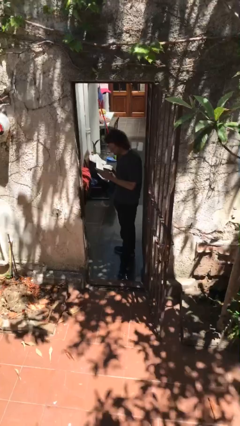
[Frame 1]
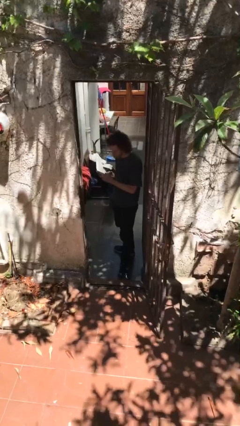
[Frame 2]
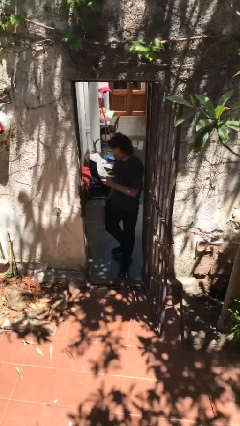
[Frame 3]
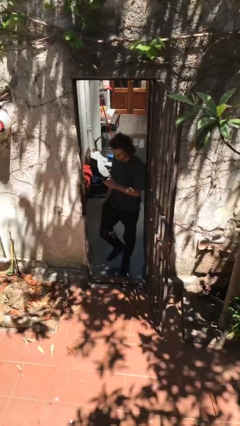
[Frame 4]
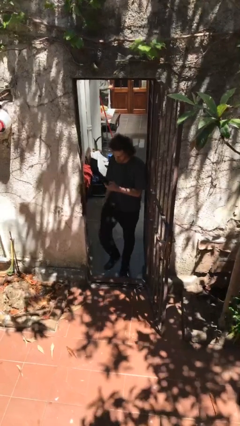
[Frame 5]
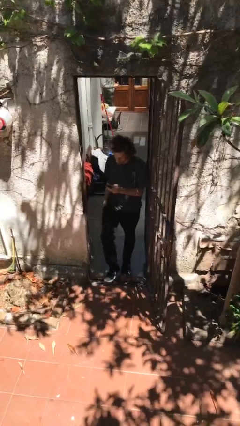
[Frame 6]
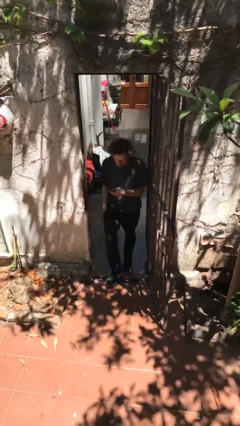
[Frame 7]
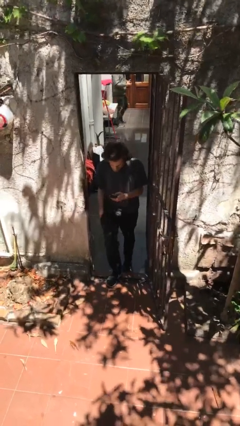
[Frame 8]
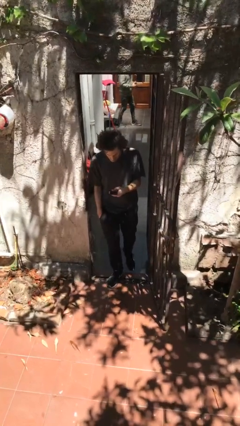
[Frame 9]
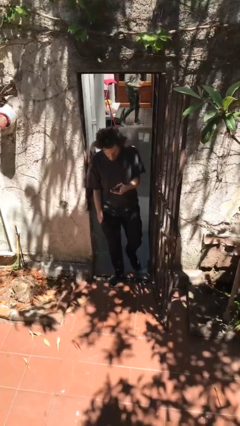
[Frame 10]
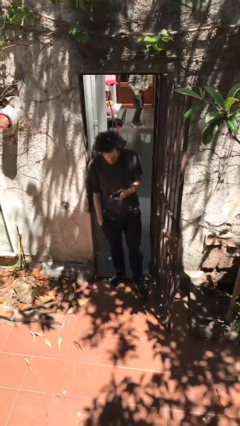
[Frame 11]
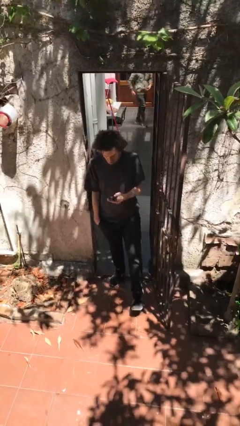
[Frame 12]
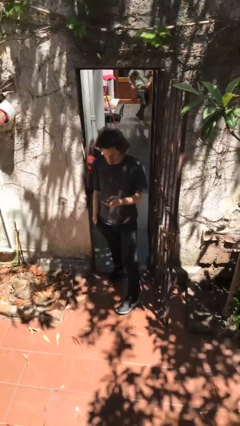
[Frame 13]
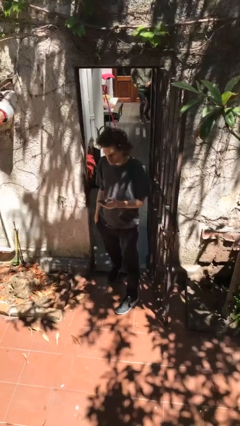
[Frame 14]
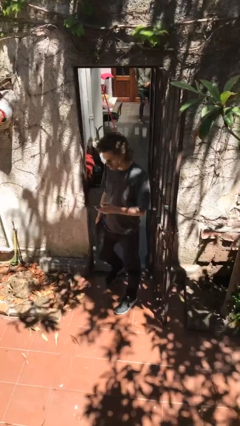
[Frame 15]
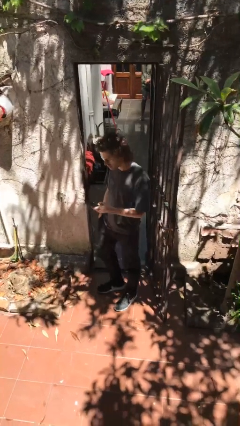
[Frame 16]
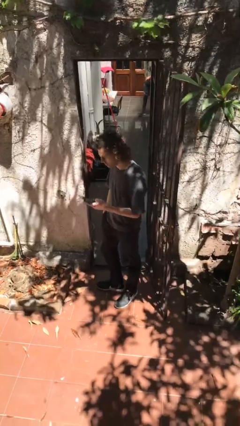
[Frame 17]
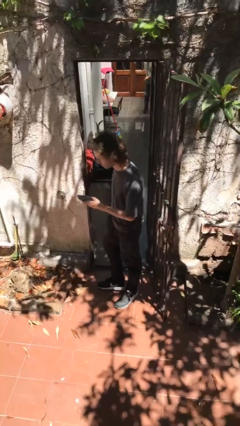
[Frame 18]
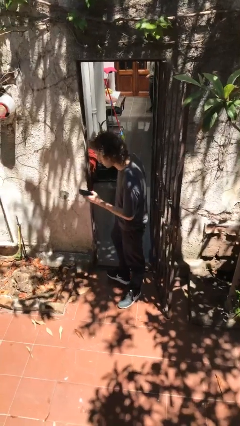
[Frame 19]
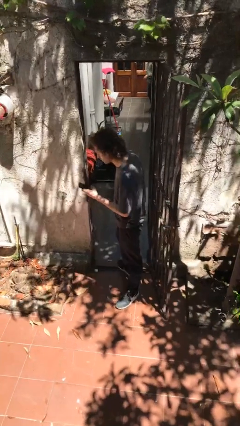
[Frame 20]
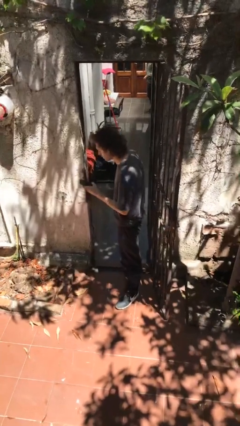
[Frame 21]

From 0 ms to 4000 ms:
person enters scene through structure

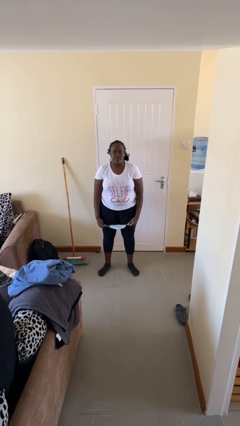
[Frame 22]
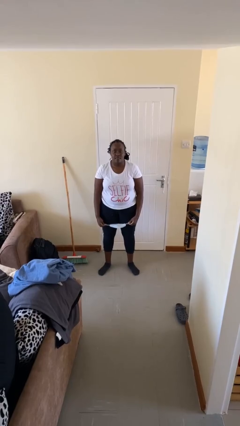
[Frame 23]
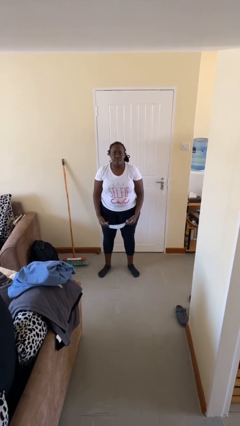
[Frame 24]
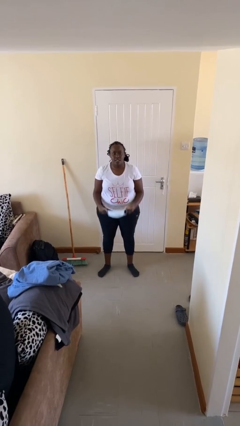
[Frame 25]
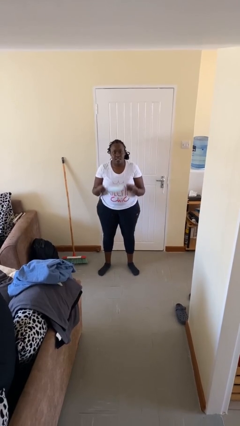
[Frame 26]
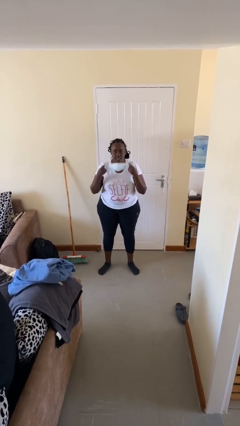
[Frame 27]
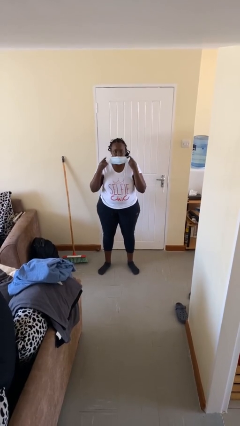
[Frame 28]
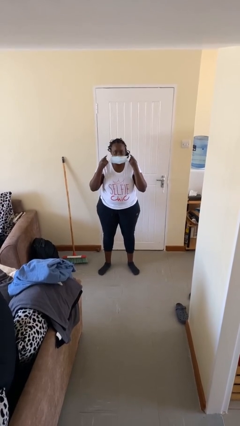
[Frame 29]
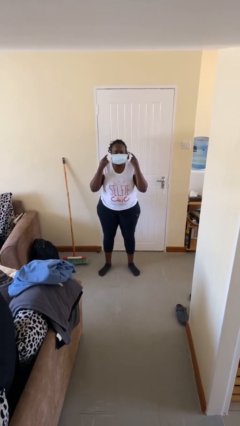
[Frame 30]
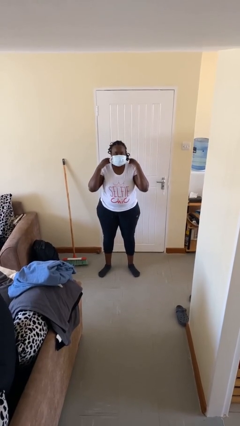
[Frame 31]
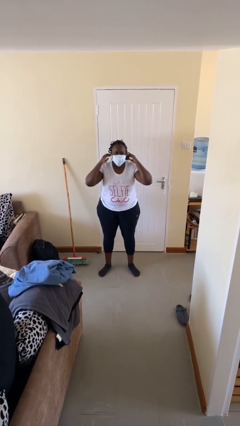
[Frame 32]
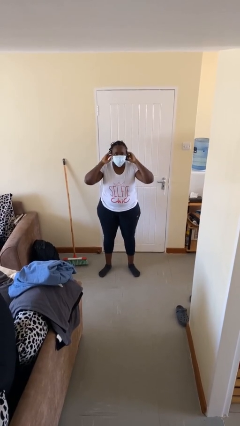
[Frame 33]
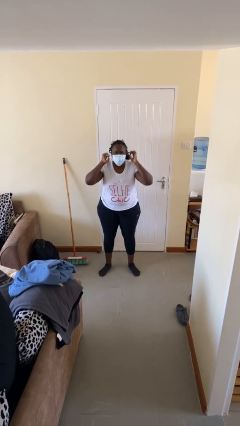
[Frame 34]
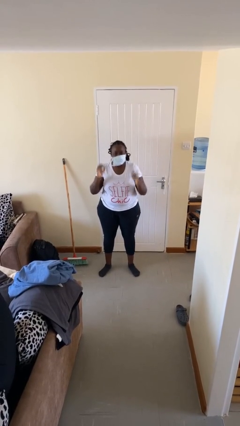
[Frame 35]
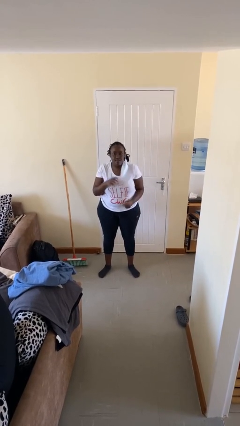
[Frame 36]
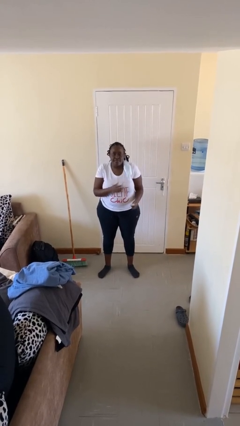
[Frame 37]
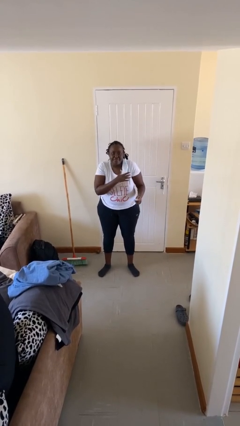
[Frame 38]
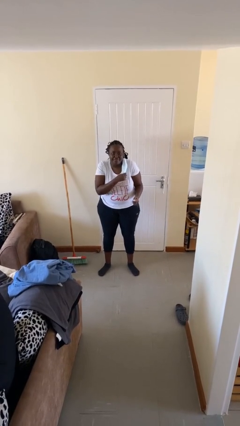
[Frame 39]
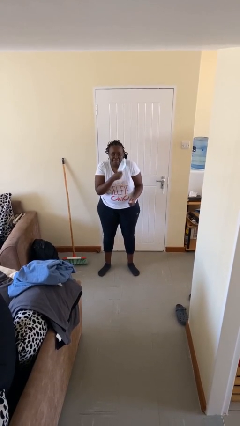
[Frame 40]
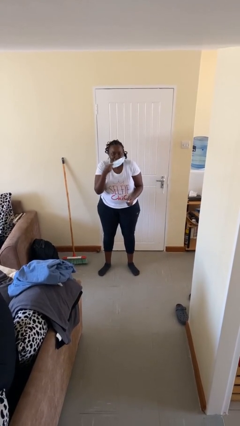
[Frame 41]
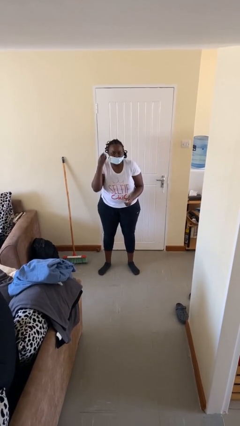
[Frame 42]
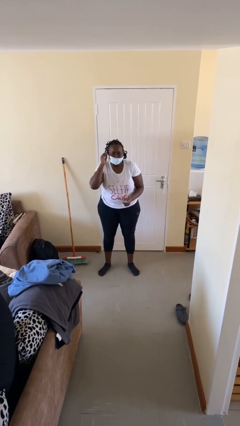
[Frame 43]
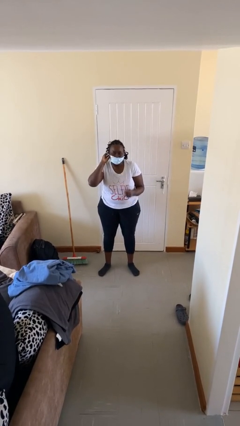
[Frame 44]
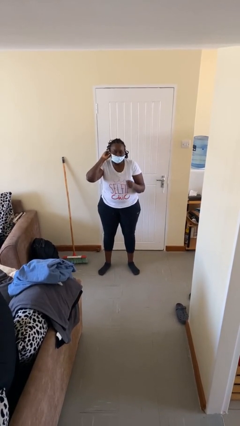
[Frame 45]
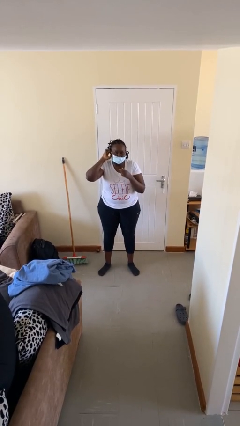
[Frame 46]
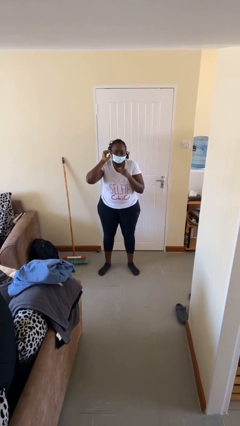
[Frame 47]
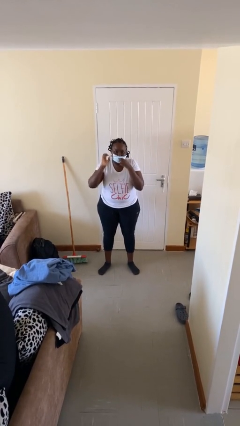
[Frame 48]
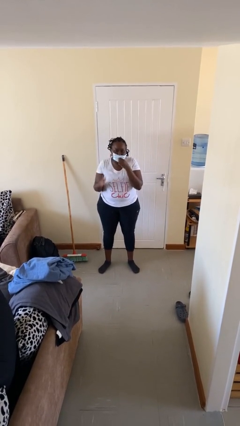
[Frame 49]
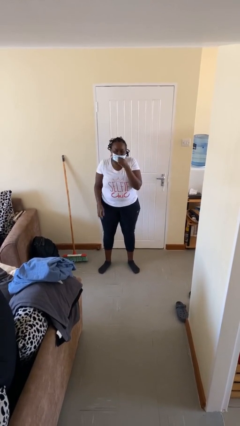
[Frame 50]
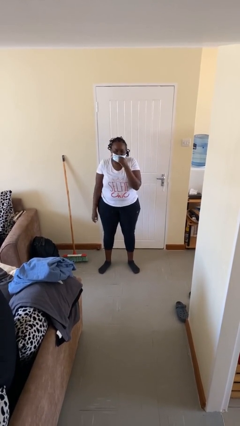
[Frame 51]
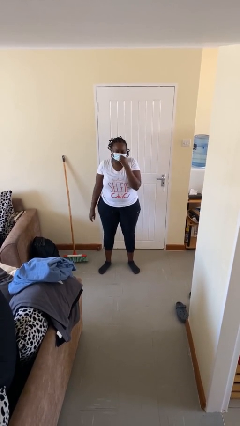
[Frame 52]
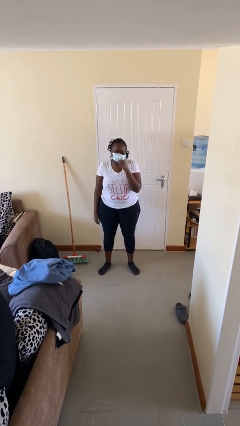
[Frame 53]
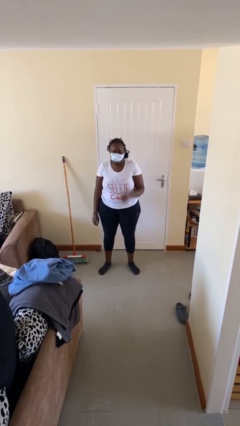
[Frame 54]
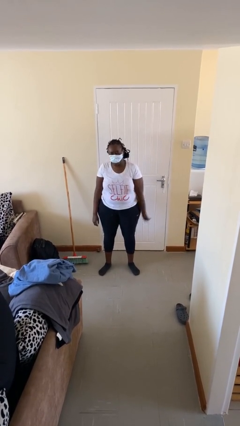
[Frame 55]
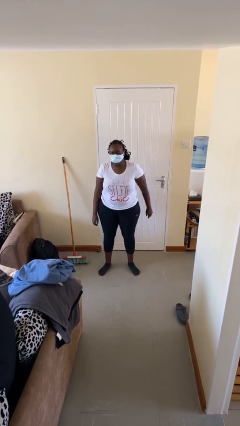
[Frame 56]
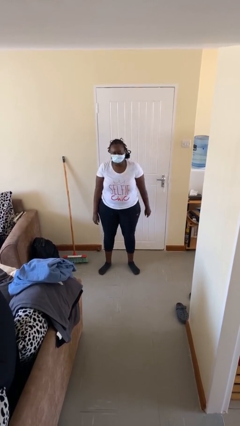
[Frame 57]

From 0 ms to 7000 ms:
person puts on facemask

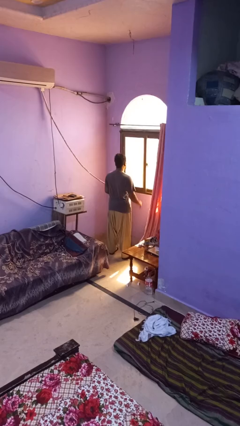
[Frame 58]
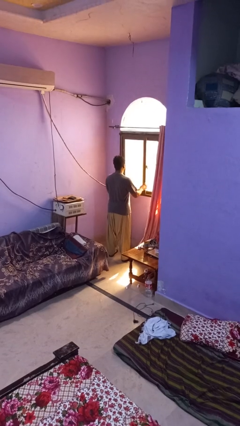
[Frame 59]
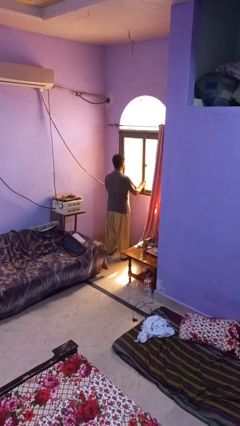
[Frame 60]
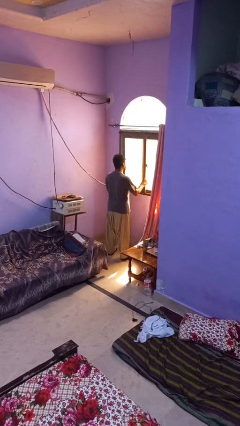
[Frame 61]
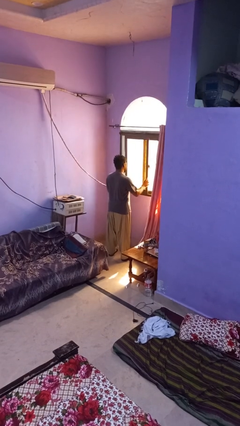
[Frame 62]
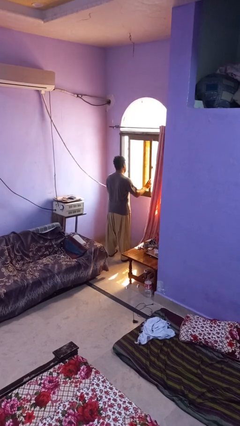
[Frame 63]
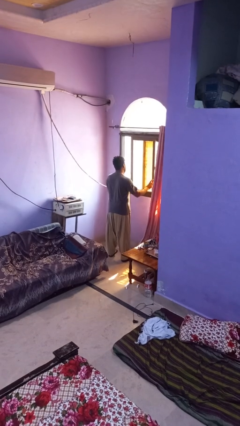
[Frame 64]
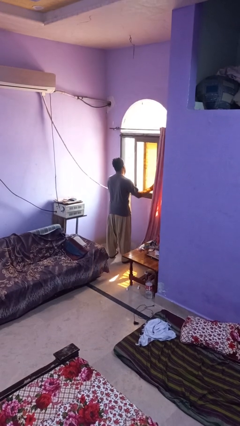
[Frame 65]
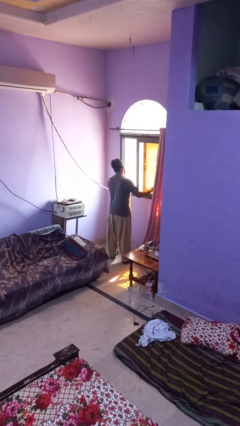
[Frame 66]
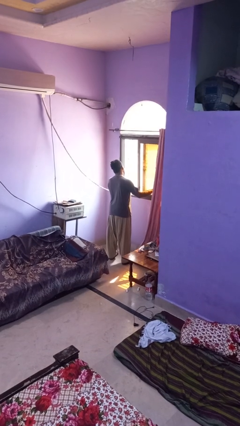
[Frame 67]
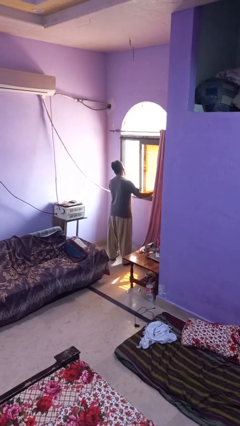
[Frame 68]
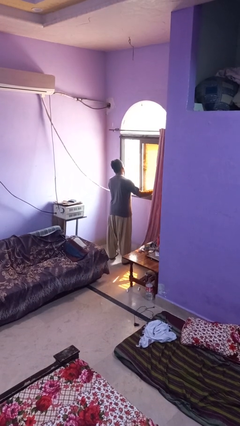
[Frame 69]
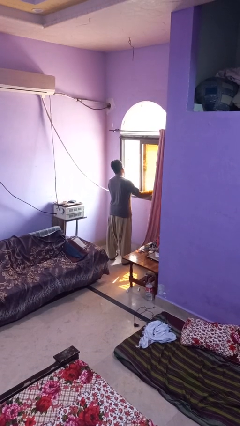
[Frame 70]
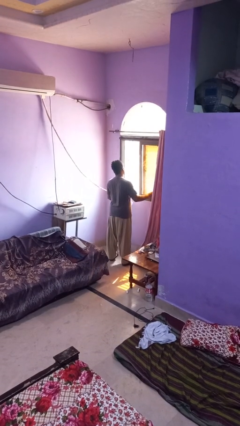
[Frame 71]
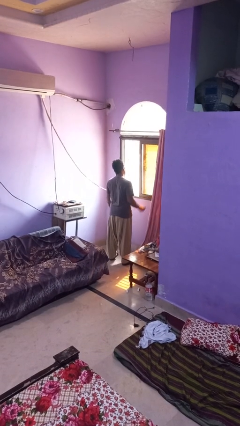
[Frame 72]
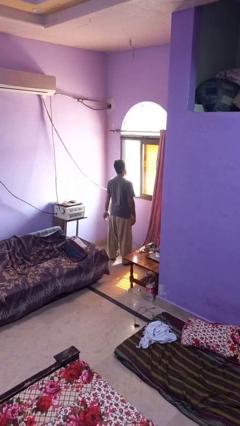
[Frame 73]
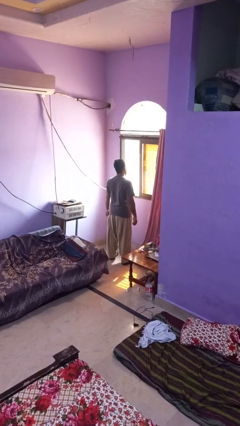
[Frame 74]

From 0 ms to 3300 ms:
person opens home window

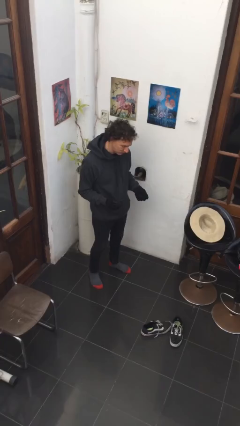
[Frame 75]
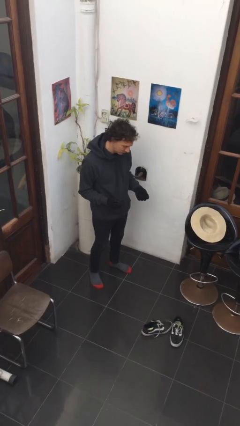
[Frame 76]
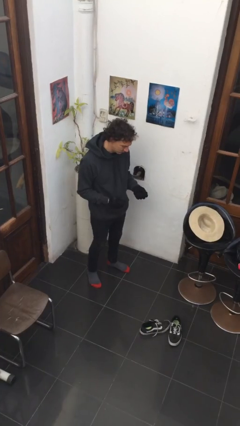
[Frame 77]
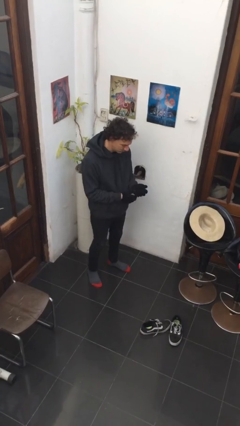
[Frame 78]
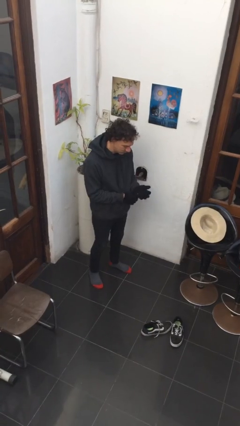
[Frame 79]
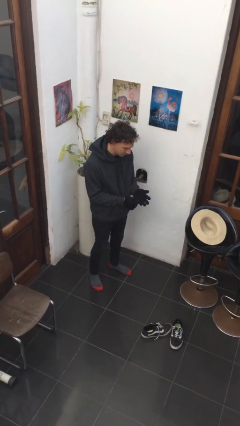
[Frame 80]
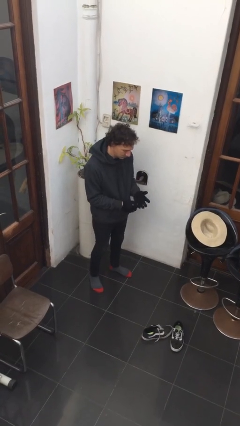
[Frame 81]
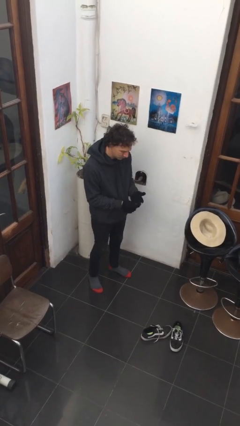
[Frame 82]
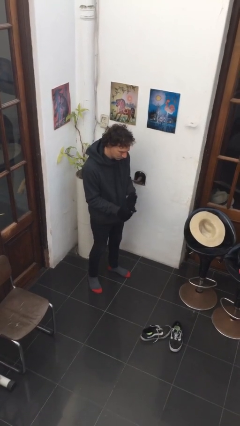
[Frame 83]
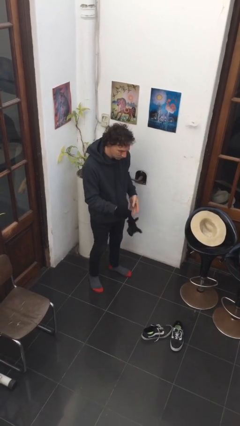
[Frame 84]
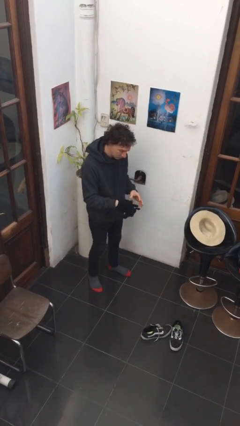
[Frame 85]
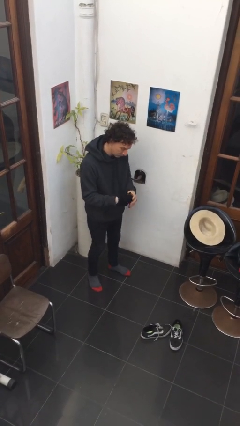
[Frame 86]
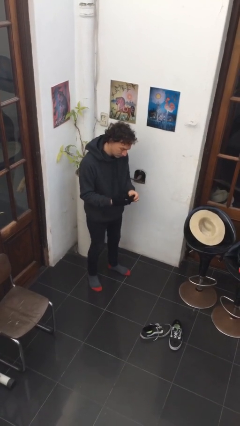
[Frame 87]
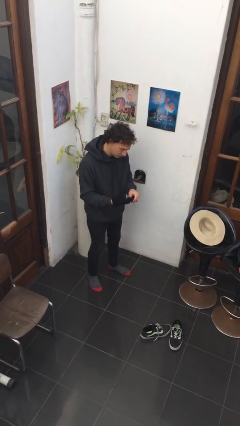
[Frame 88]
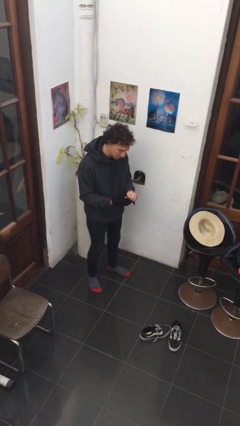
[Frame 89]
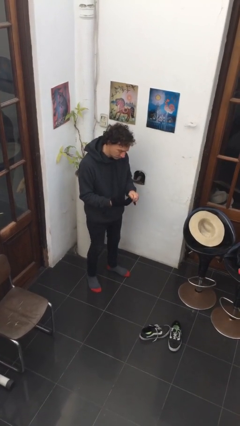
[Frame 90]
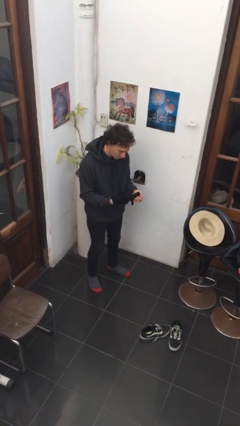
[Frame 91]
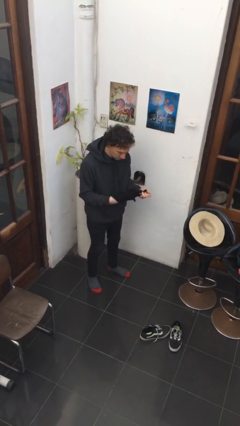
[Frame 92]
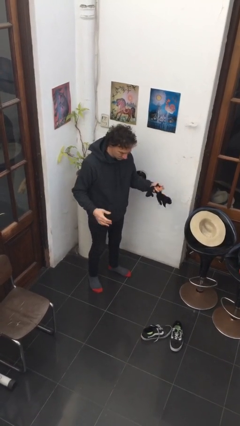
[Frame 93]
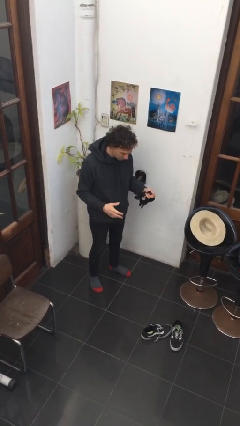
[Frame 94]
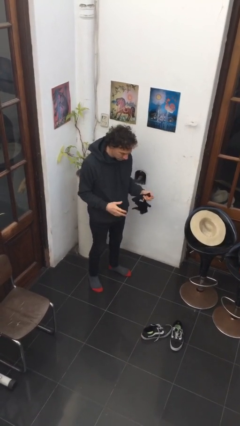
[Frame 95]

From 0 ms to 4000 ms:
person takes off gloves
